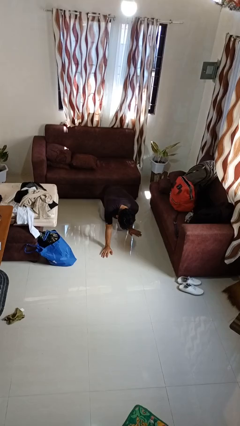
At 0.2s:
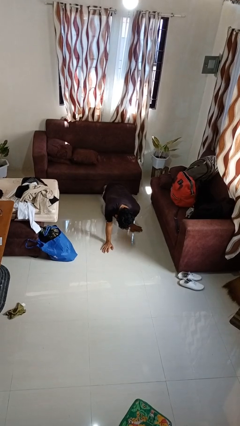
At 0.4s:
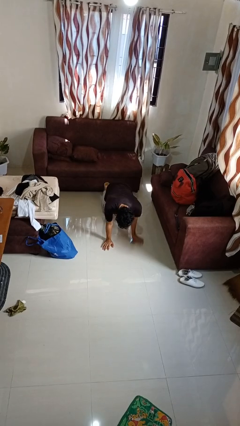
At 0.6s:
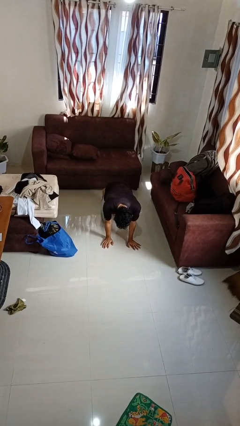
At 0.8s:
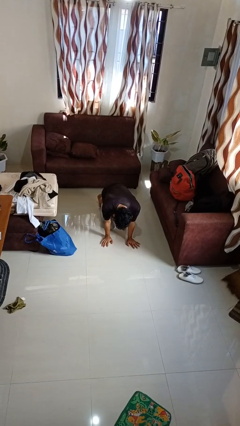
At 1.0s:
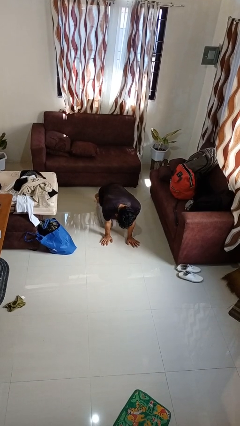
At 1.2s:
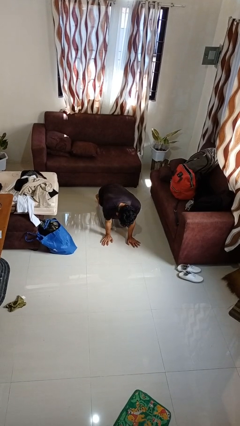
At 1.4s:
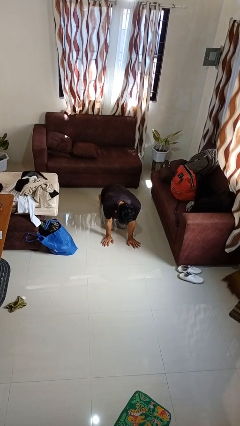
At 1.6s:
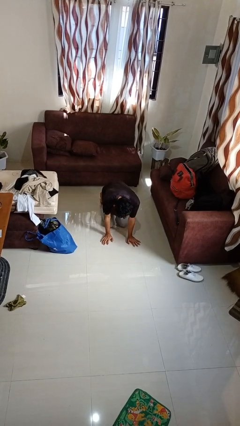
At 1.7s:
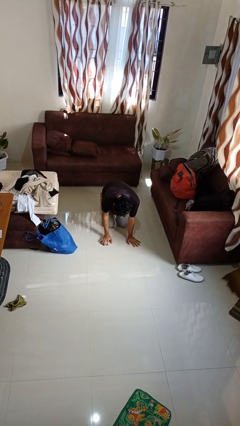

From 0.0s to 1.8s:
person crawls

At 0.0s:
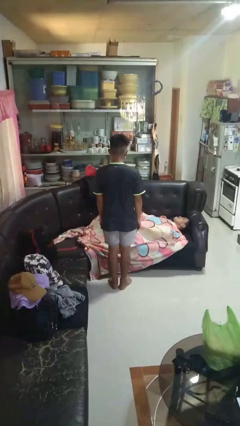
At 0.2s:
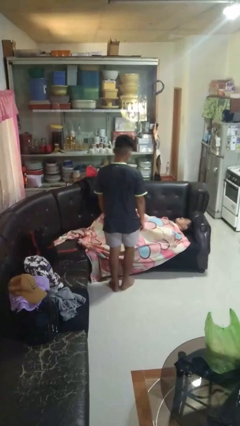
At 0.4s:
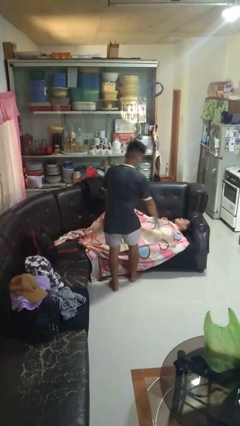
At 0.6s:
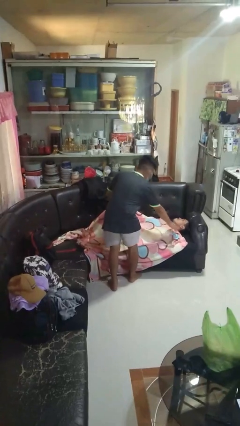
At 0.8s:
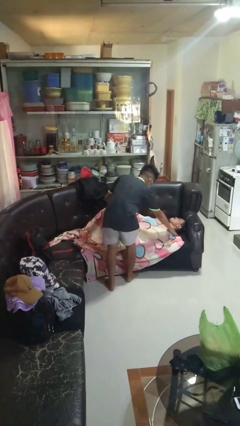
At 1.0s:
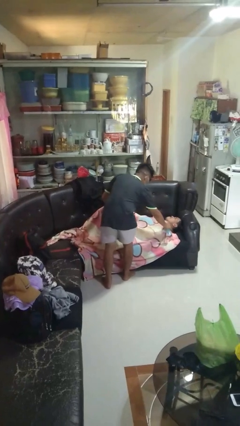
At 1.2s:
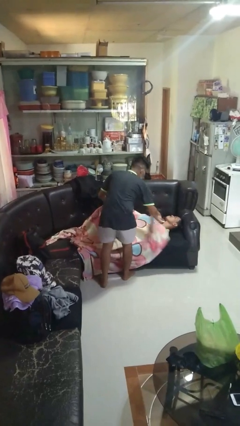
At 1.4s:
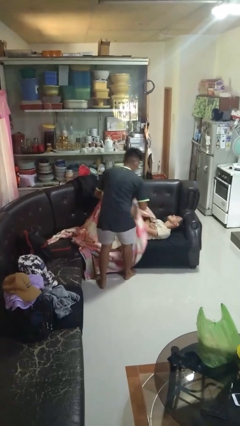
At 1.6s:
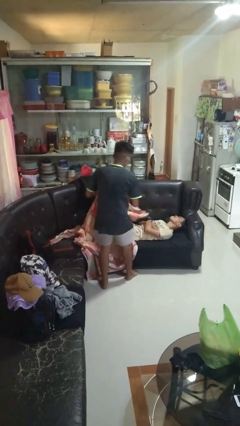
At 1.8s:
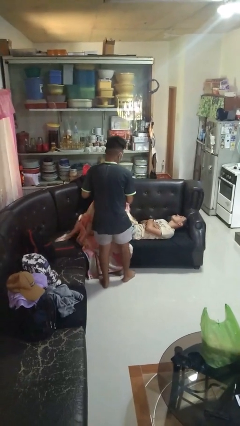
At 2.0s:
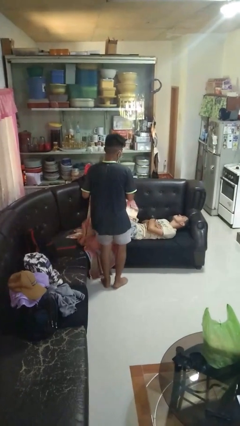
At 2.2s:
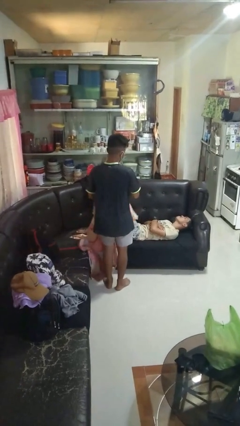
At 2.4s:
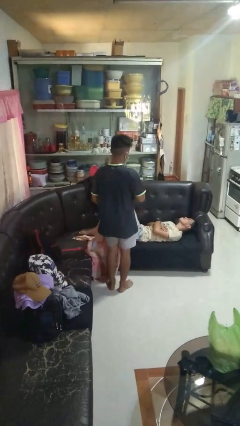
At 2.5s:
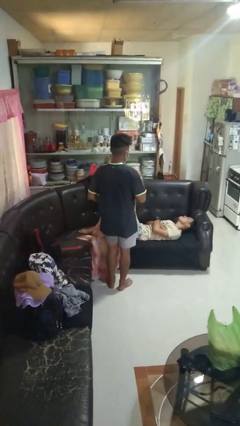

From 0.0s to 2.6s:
person uncovers friend with blanket

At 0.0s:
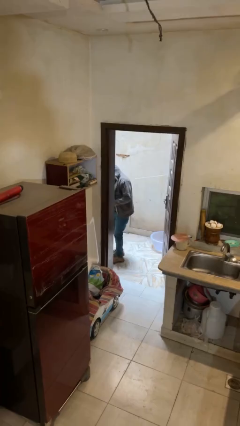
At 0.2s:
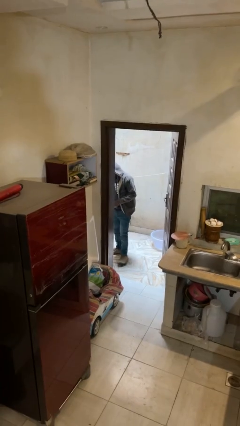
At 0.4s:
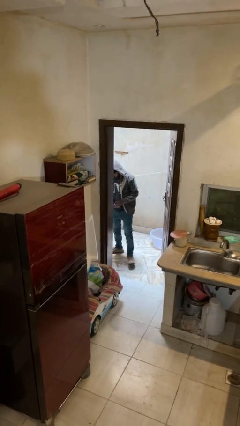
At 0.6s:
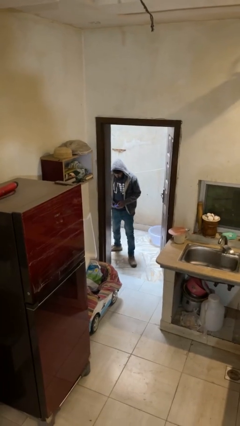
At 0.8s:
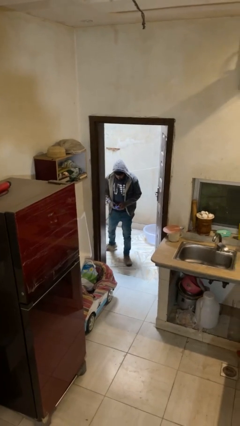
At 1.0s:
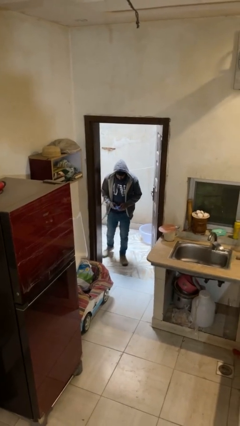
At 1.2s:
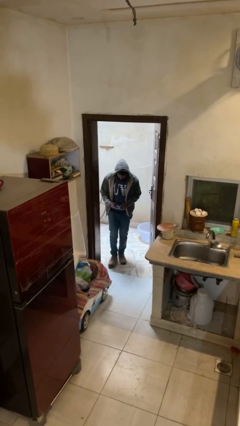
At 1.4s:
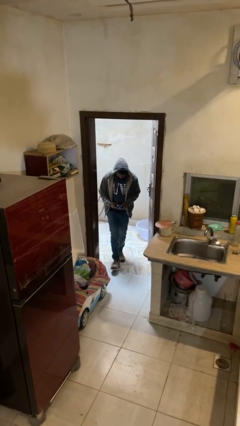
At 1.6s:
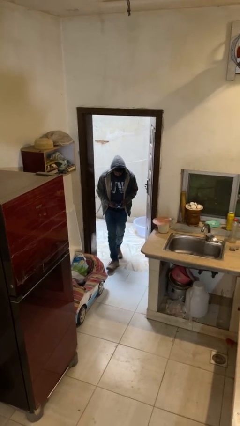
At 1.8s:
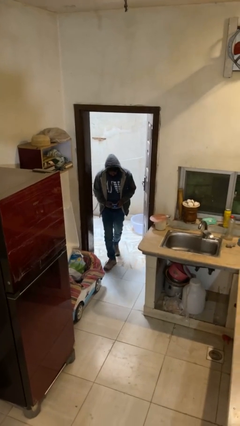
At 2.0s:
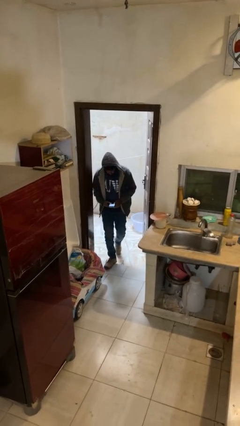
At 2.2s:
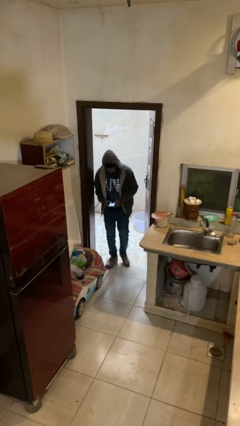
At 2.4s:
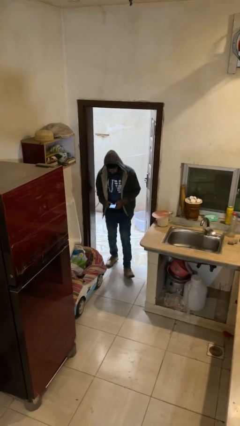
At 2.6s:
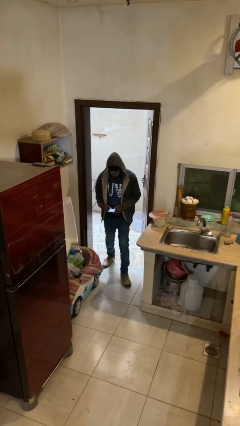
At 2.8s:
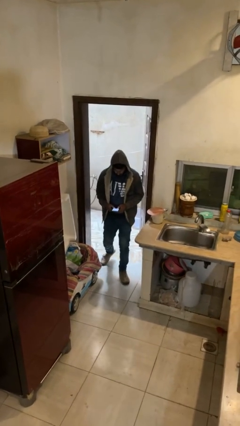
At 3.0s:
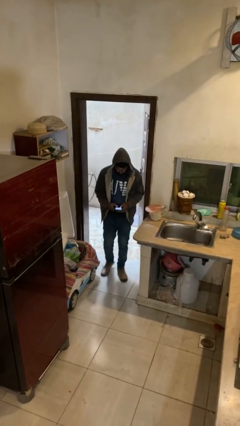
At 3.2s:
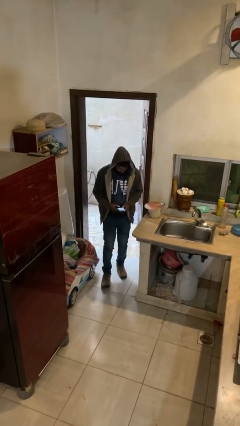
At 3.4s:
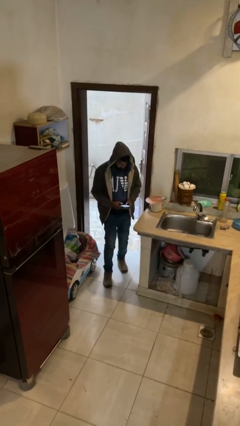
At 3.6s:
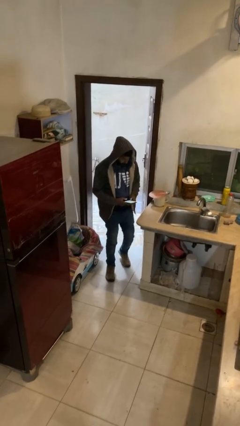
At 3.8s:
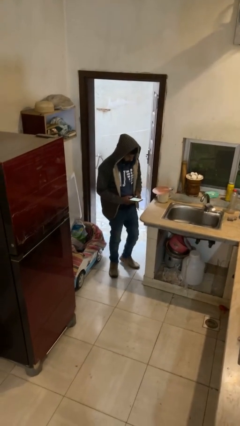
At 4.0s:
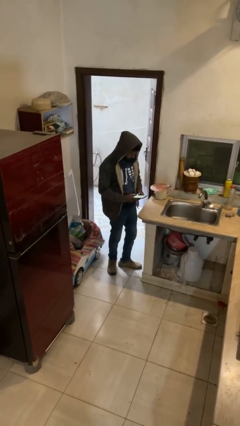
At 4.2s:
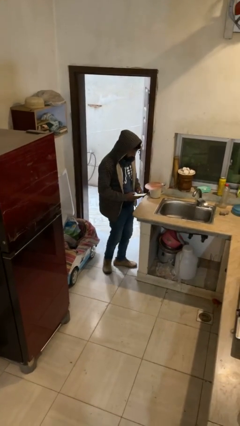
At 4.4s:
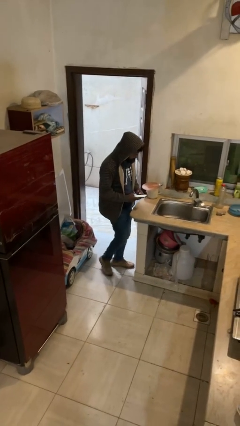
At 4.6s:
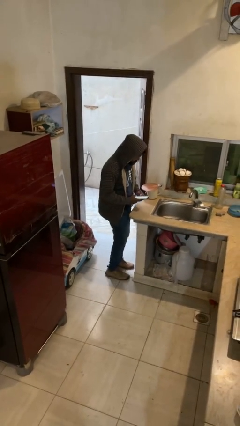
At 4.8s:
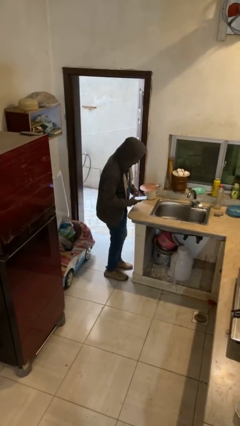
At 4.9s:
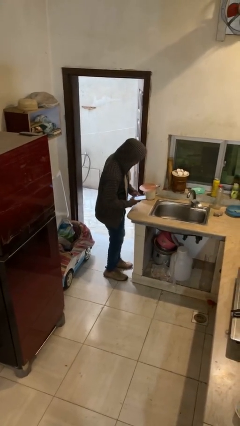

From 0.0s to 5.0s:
person enters scene through structure

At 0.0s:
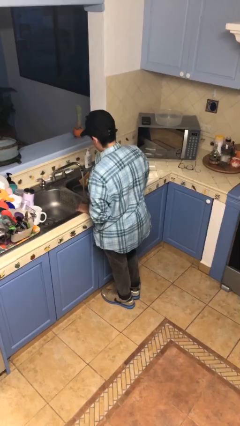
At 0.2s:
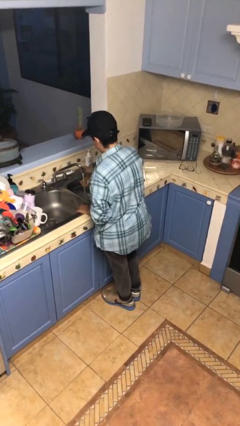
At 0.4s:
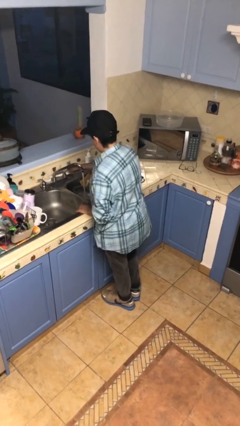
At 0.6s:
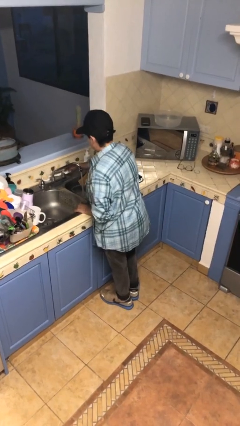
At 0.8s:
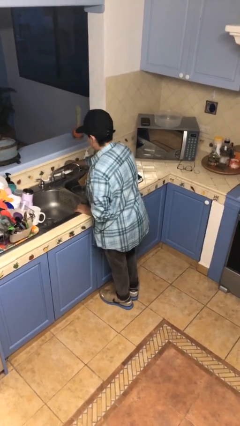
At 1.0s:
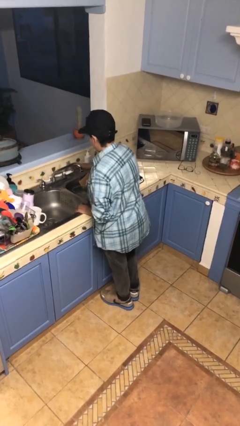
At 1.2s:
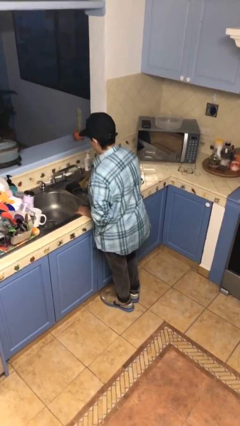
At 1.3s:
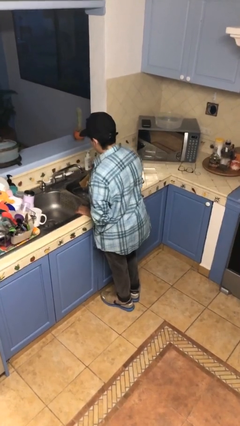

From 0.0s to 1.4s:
person turns off faucet

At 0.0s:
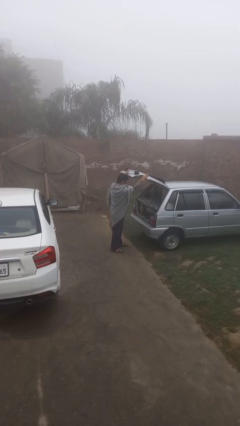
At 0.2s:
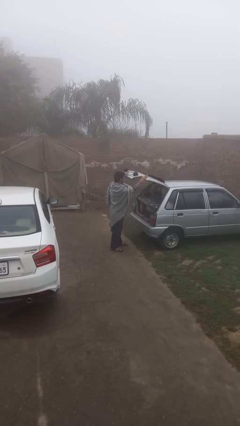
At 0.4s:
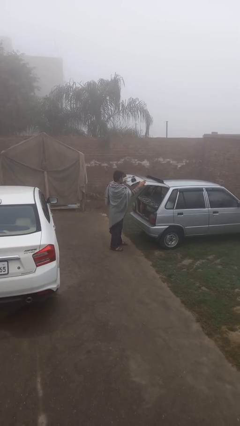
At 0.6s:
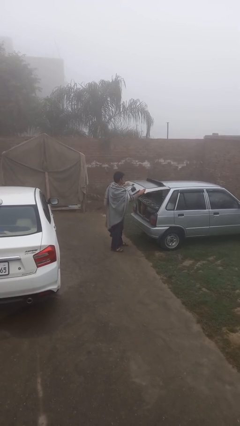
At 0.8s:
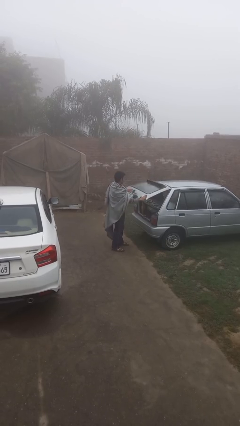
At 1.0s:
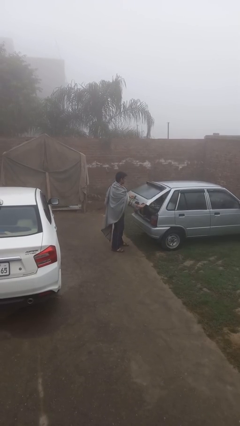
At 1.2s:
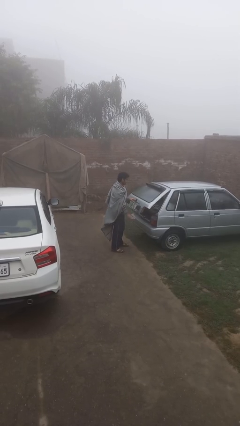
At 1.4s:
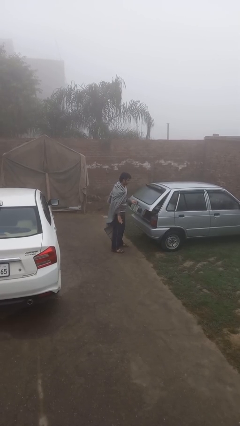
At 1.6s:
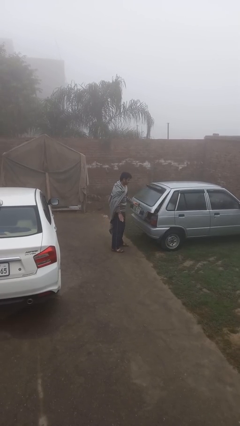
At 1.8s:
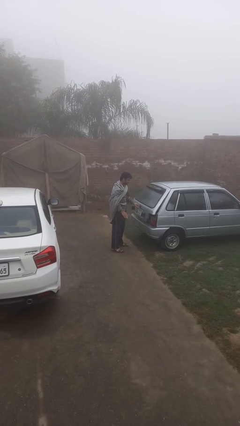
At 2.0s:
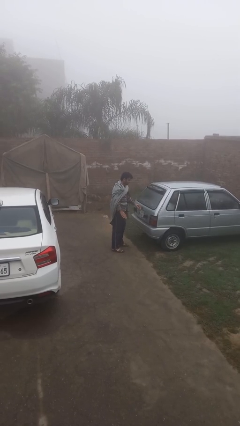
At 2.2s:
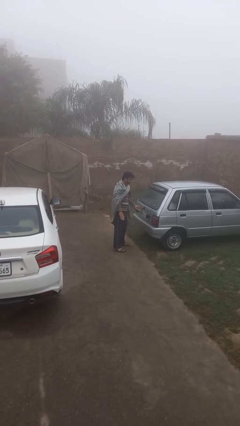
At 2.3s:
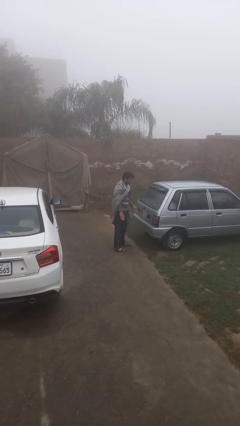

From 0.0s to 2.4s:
person closes car trunk

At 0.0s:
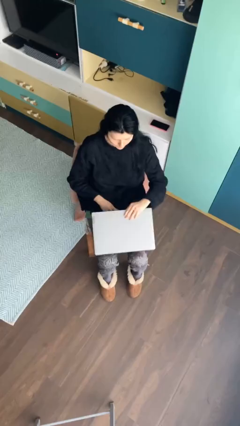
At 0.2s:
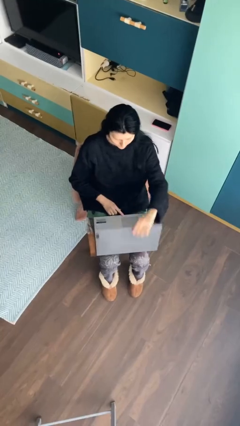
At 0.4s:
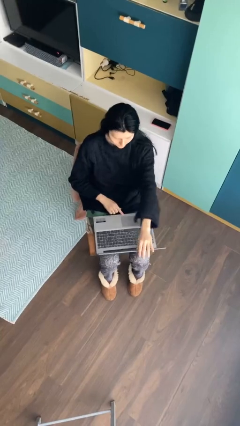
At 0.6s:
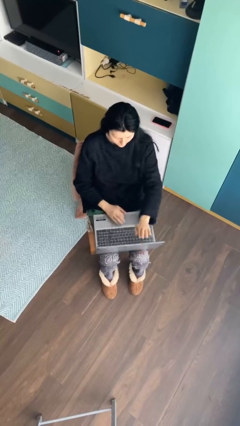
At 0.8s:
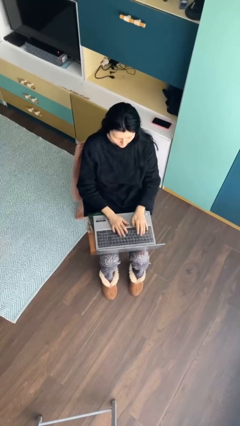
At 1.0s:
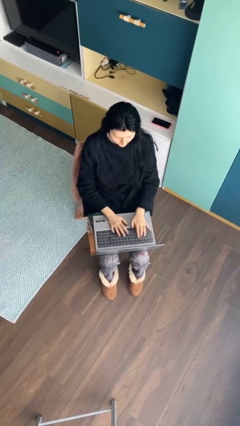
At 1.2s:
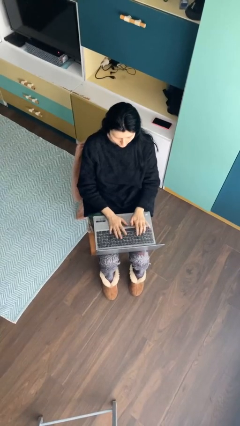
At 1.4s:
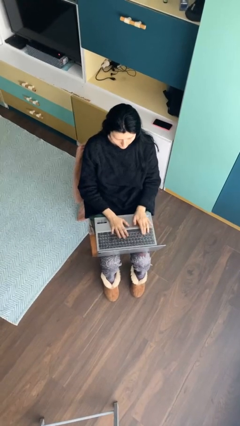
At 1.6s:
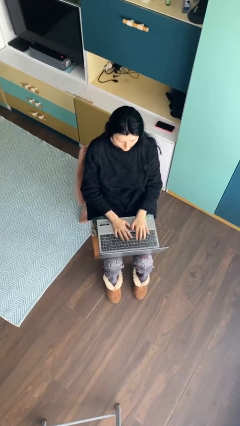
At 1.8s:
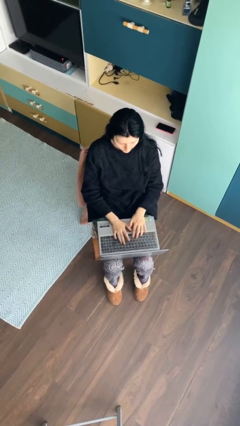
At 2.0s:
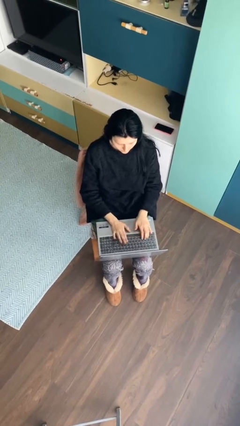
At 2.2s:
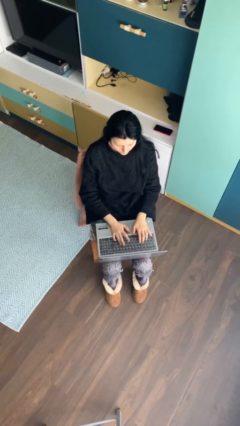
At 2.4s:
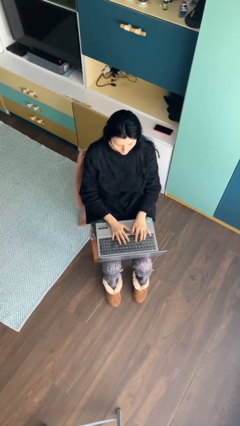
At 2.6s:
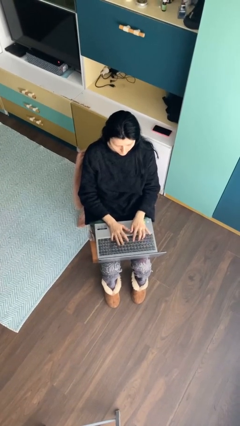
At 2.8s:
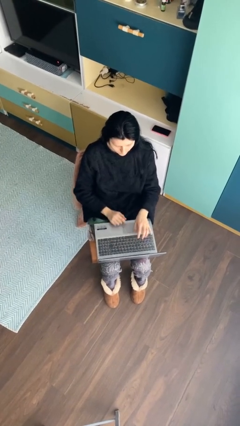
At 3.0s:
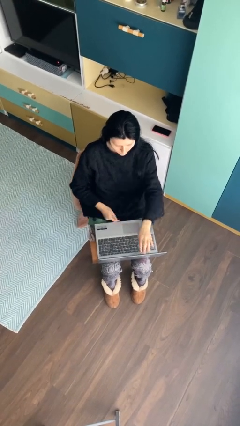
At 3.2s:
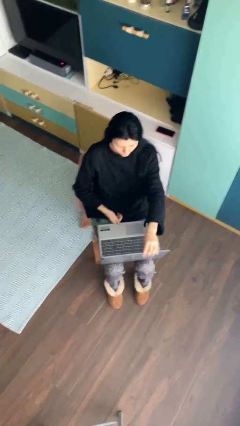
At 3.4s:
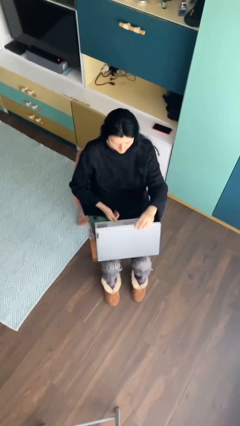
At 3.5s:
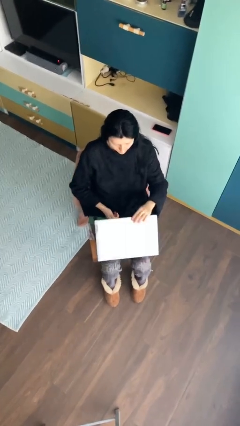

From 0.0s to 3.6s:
person interacts with laptop

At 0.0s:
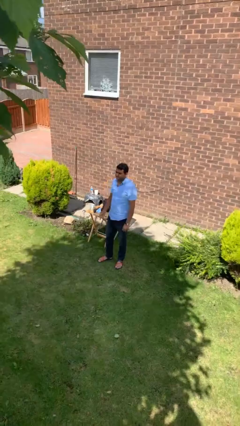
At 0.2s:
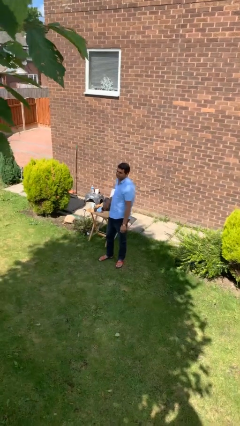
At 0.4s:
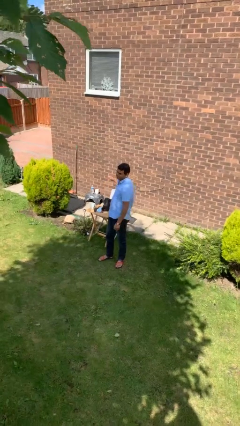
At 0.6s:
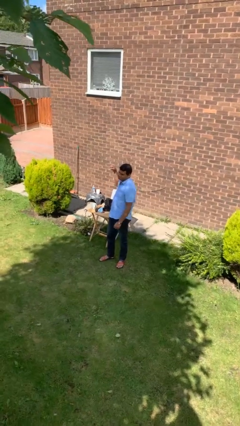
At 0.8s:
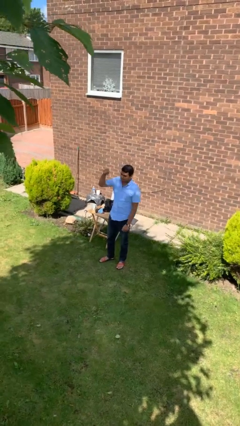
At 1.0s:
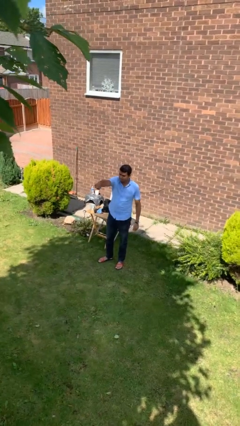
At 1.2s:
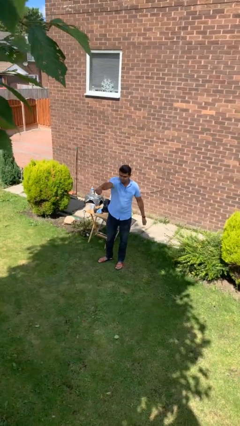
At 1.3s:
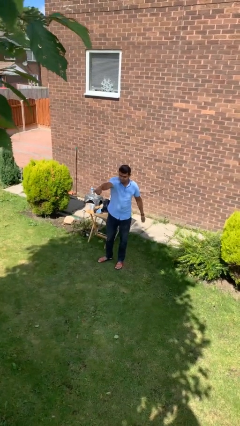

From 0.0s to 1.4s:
person punches
